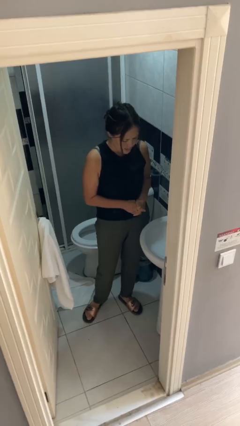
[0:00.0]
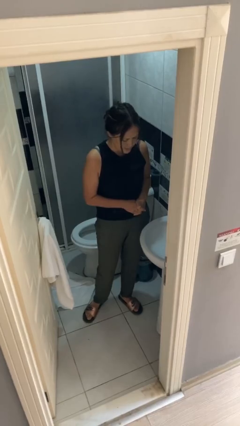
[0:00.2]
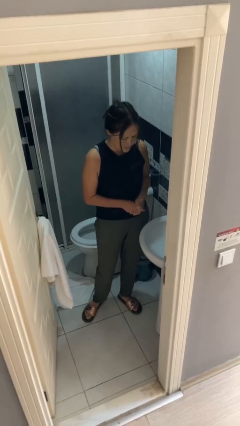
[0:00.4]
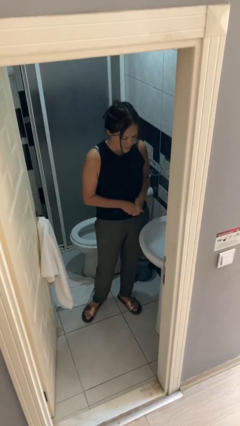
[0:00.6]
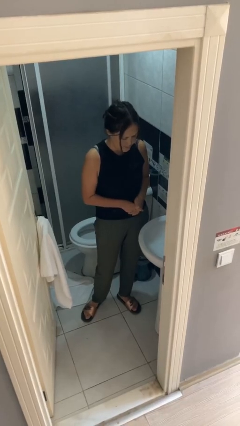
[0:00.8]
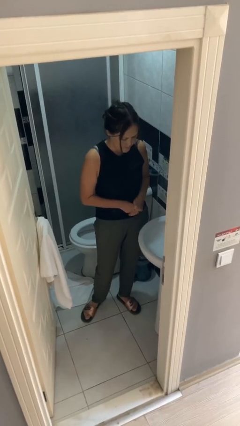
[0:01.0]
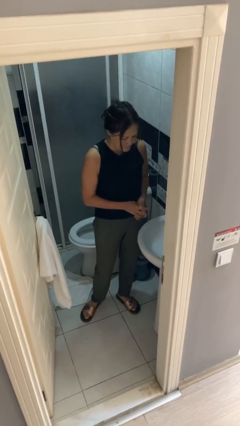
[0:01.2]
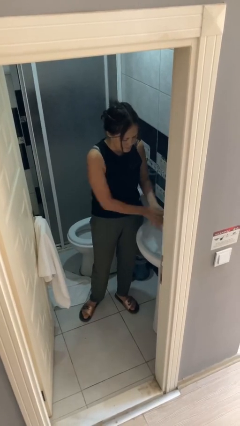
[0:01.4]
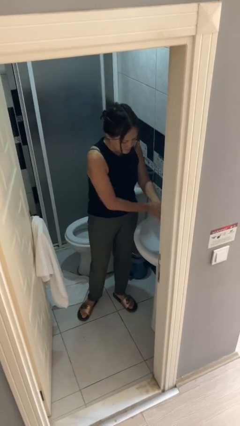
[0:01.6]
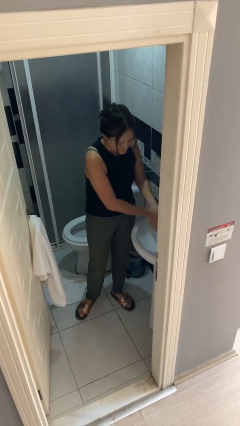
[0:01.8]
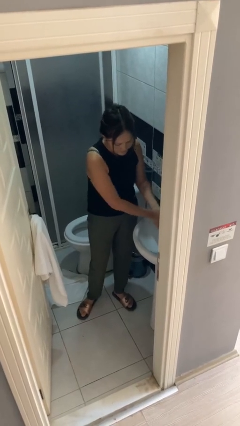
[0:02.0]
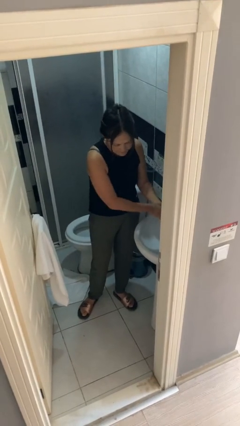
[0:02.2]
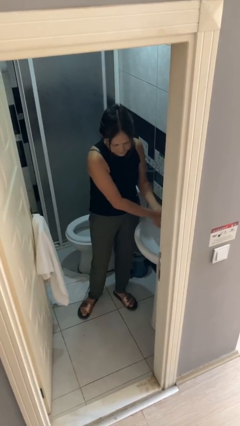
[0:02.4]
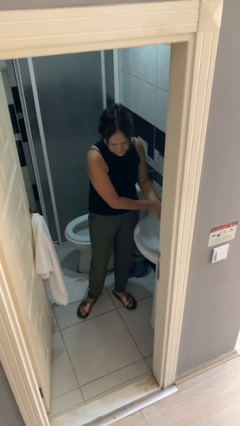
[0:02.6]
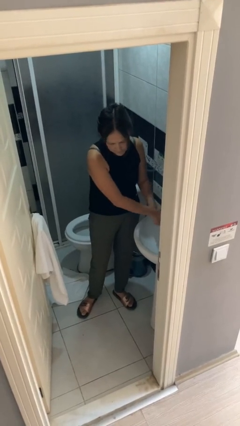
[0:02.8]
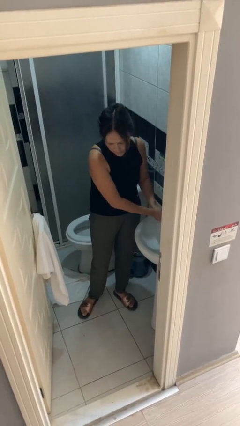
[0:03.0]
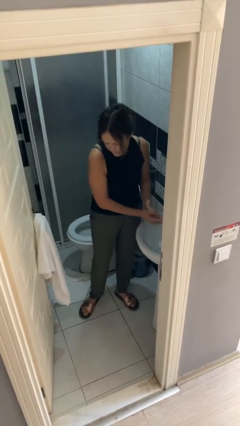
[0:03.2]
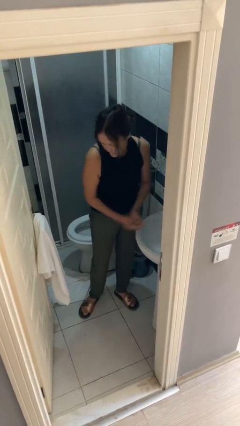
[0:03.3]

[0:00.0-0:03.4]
person washes hands

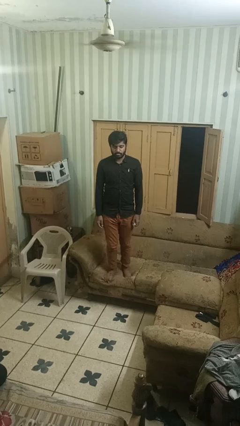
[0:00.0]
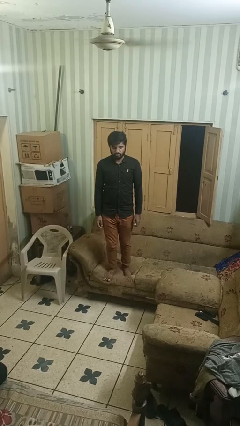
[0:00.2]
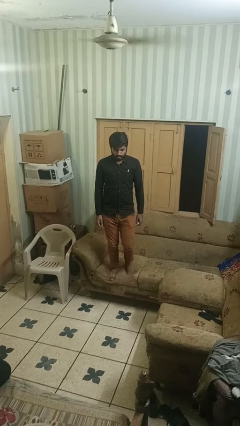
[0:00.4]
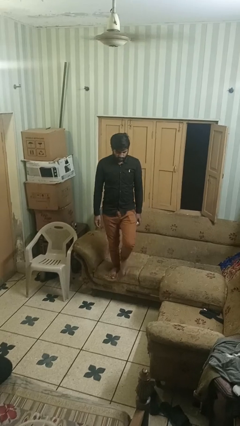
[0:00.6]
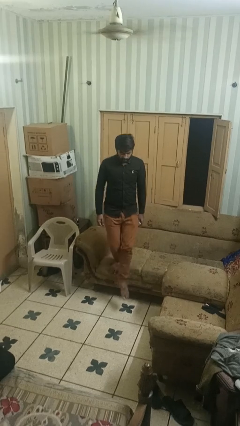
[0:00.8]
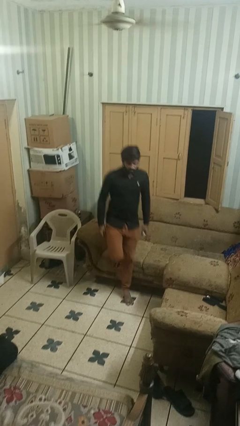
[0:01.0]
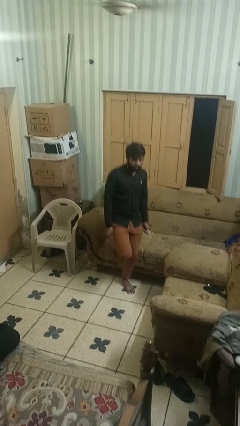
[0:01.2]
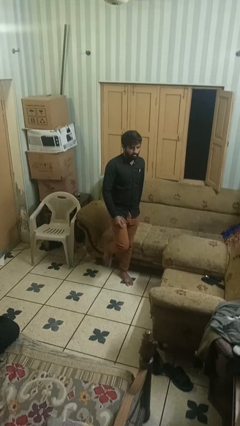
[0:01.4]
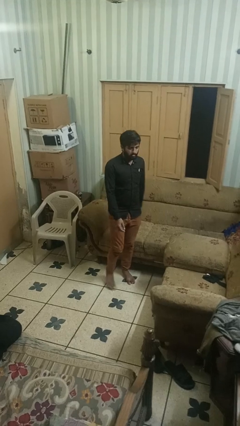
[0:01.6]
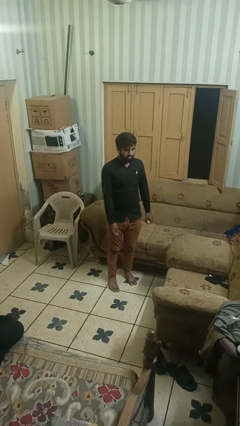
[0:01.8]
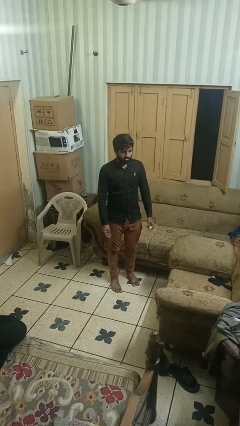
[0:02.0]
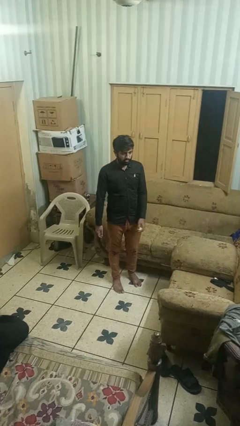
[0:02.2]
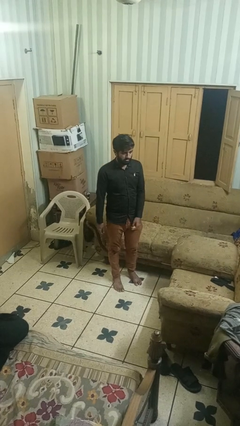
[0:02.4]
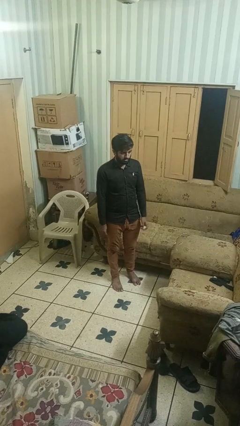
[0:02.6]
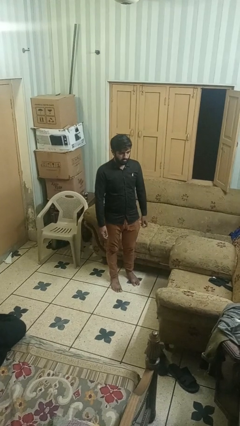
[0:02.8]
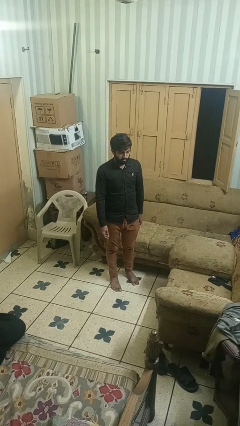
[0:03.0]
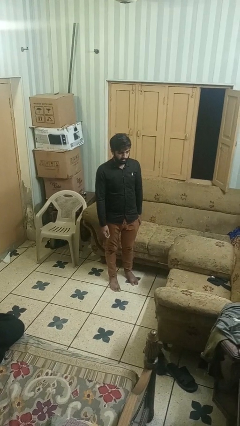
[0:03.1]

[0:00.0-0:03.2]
person climbs off couch

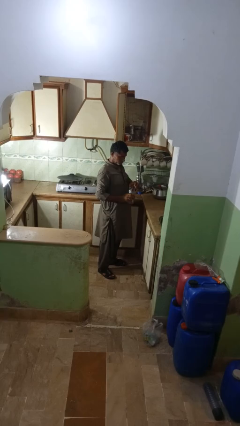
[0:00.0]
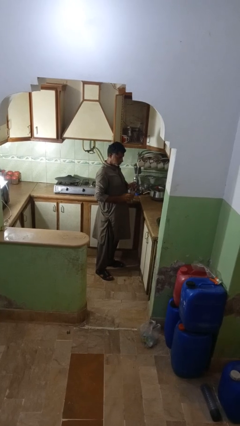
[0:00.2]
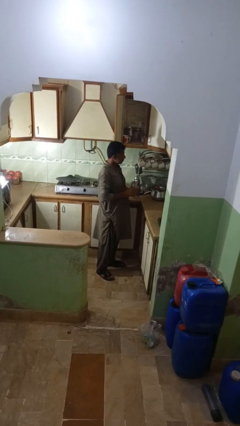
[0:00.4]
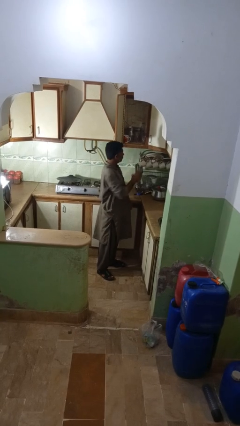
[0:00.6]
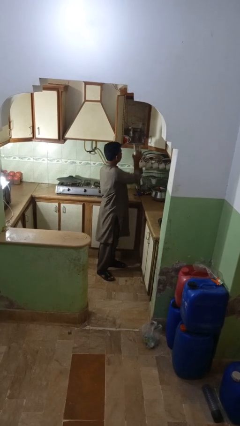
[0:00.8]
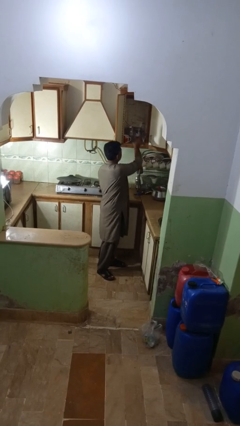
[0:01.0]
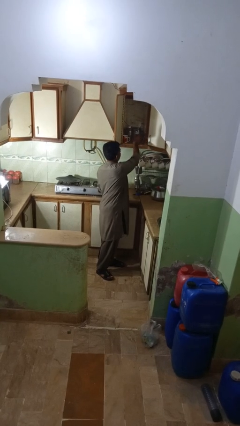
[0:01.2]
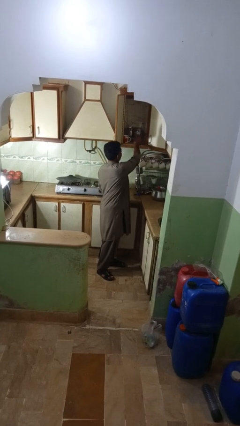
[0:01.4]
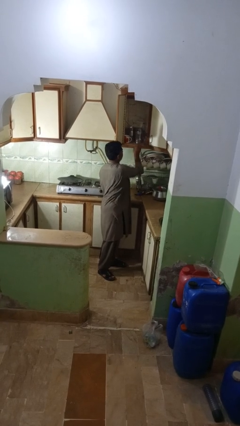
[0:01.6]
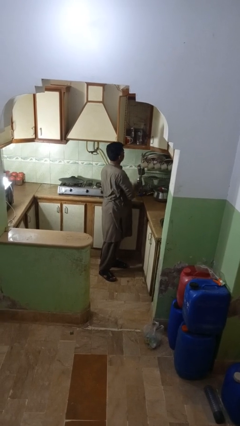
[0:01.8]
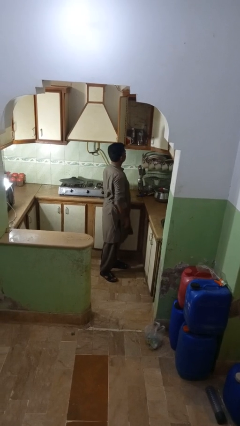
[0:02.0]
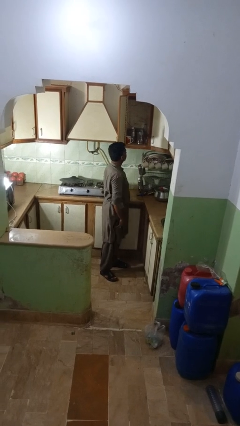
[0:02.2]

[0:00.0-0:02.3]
person puts object into kitchen drawer

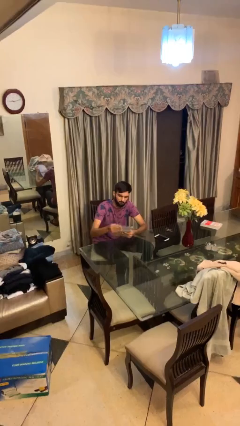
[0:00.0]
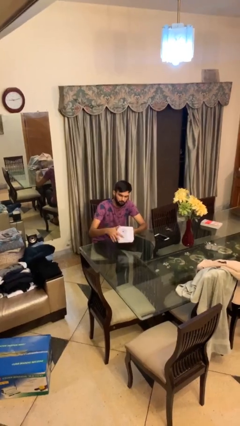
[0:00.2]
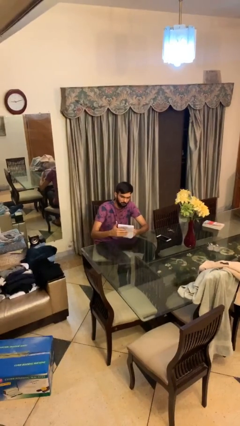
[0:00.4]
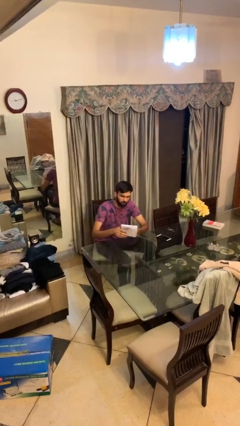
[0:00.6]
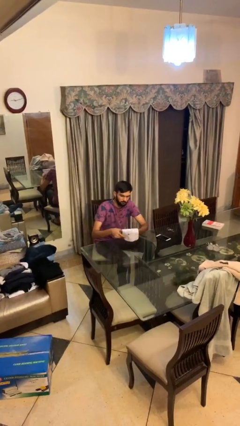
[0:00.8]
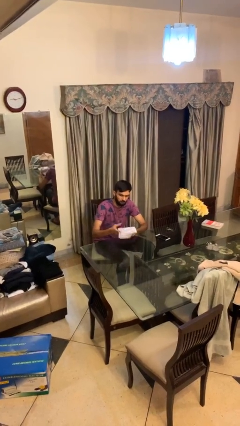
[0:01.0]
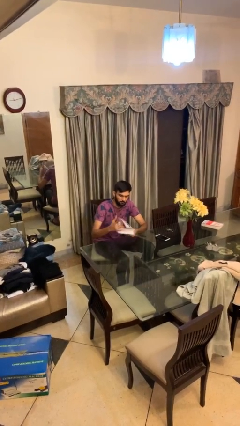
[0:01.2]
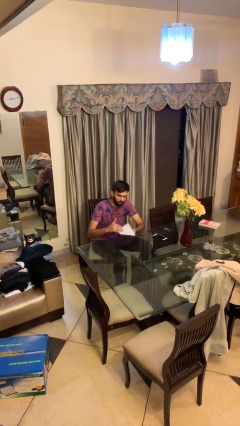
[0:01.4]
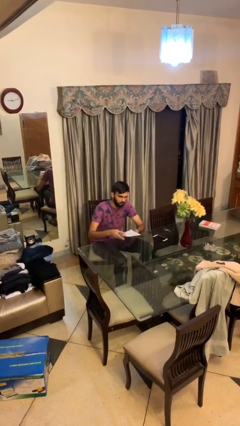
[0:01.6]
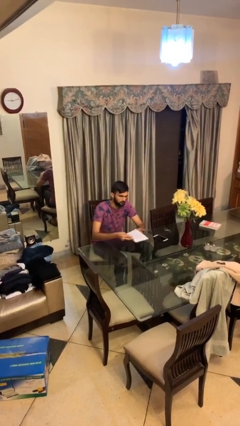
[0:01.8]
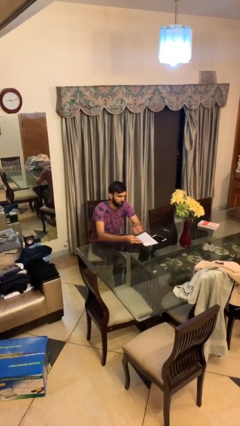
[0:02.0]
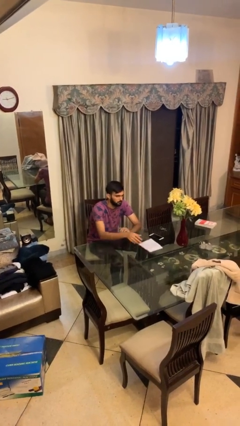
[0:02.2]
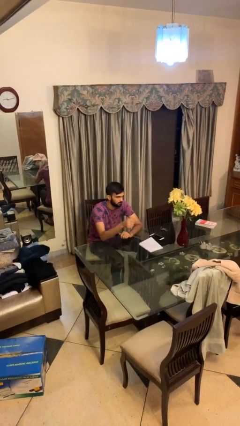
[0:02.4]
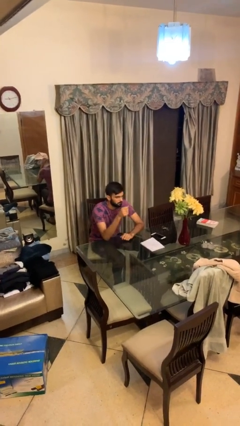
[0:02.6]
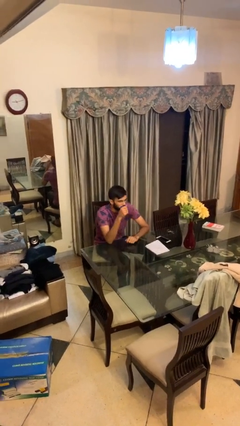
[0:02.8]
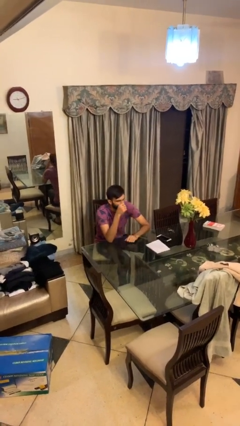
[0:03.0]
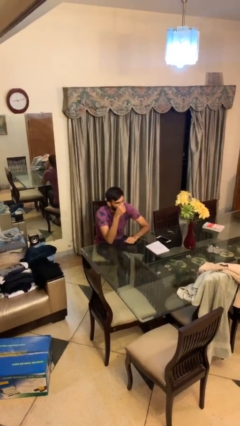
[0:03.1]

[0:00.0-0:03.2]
person puts down object on table

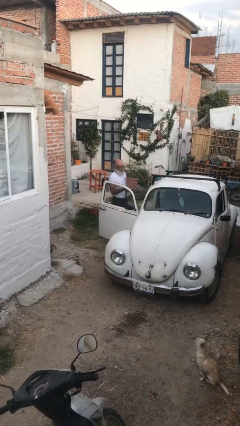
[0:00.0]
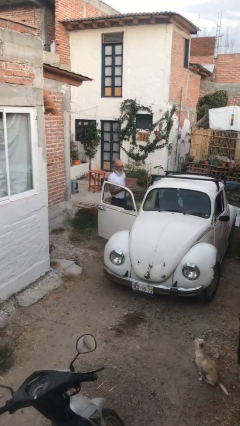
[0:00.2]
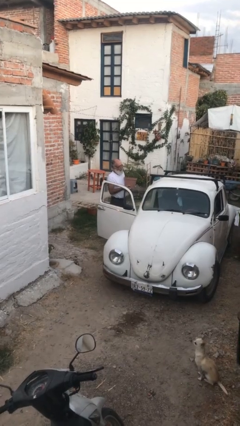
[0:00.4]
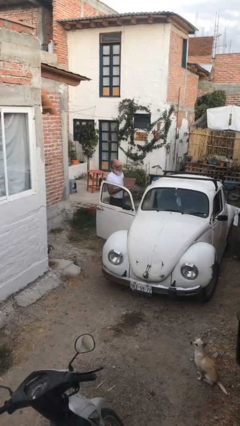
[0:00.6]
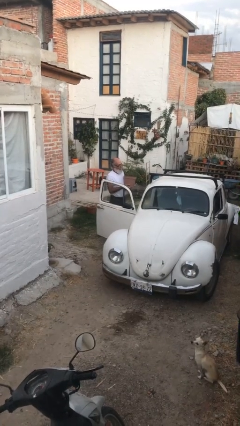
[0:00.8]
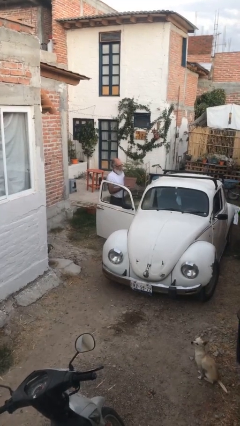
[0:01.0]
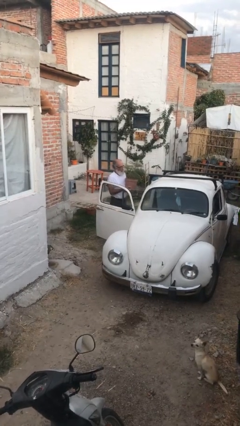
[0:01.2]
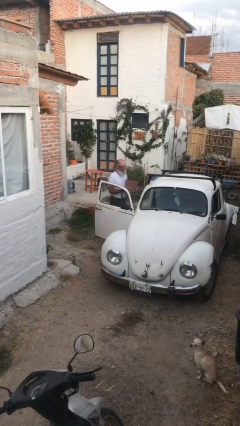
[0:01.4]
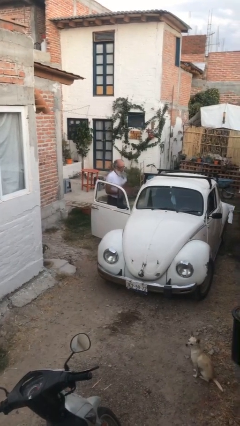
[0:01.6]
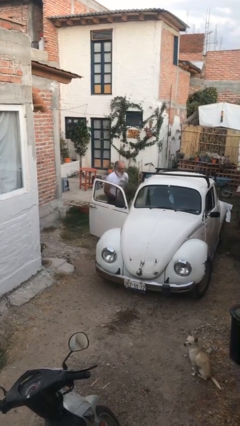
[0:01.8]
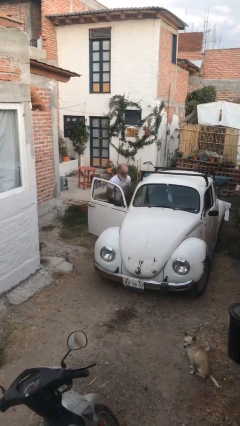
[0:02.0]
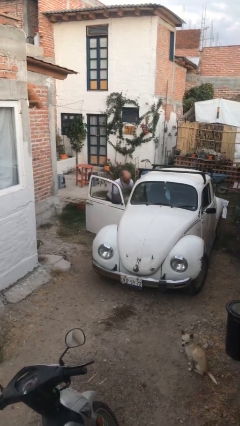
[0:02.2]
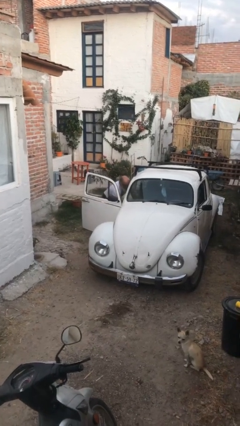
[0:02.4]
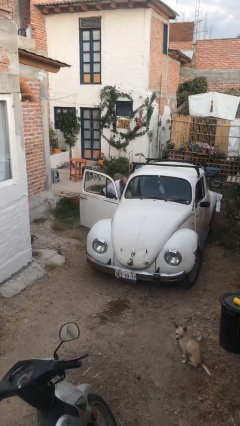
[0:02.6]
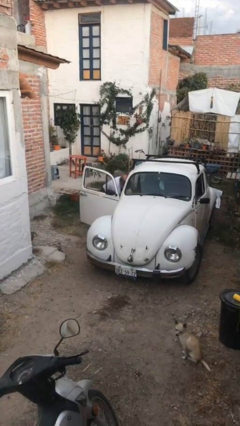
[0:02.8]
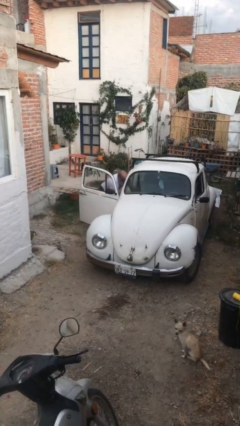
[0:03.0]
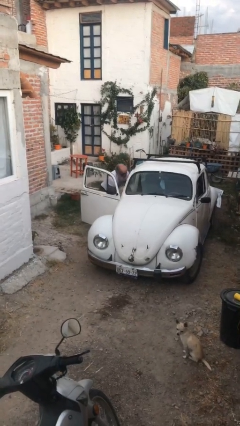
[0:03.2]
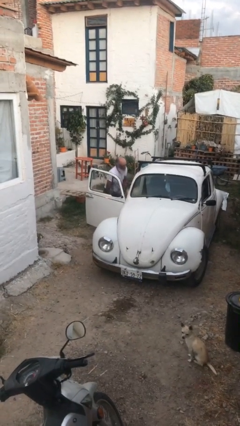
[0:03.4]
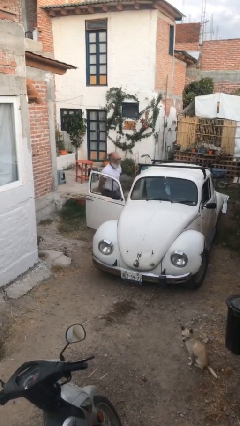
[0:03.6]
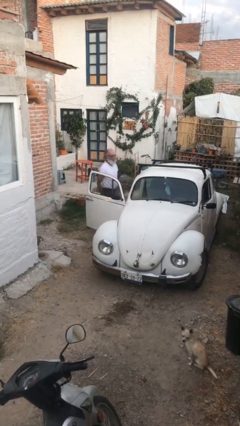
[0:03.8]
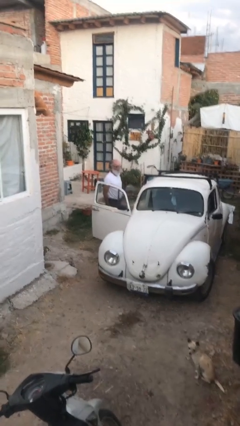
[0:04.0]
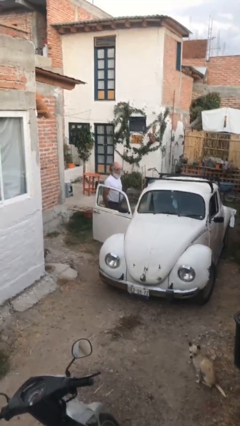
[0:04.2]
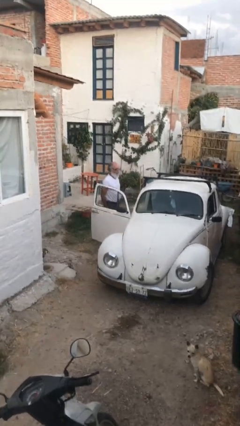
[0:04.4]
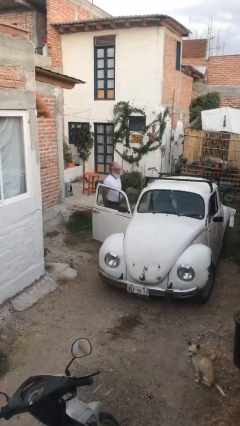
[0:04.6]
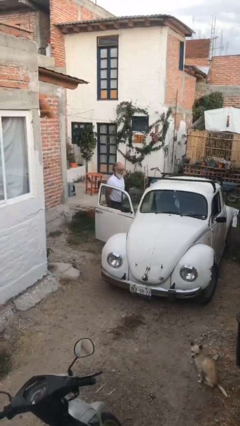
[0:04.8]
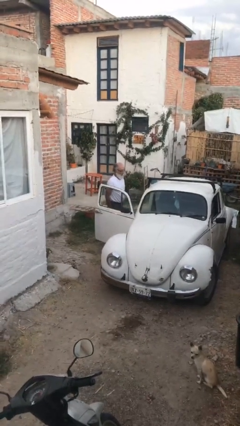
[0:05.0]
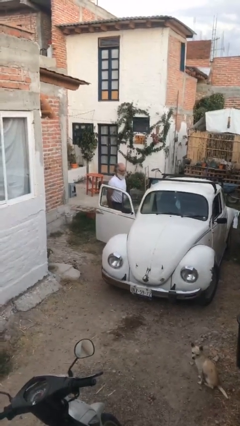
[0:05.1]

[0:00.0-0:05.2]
person loads car

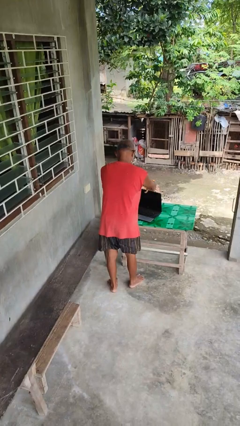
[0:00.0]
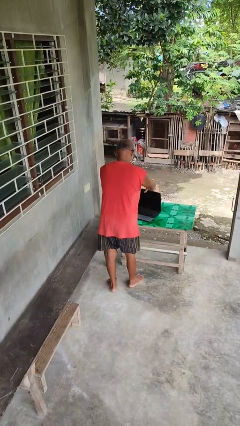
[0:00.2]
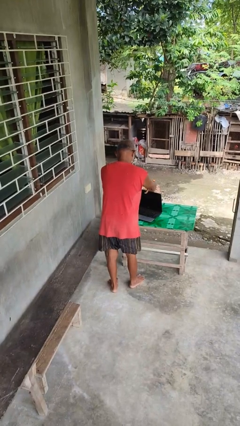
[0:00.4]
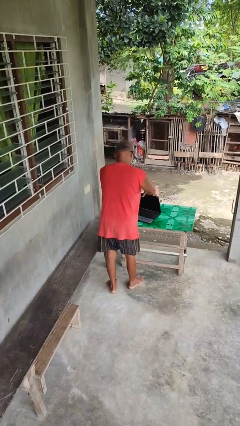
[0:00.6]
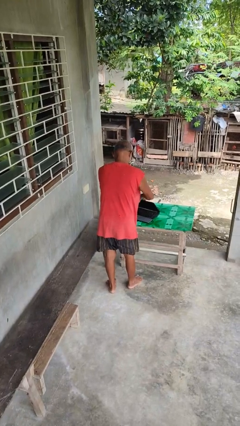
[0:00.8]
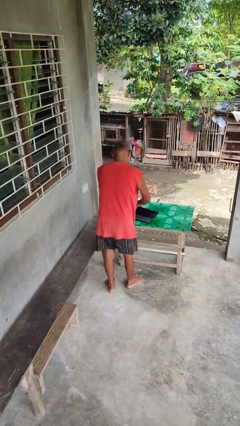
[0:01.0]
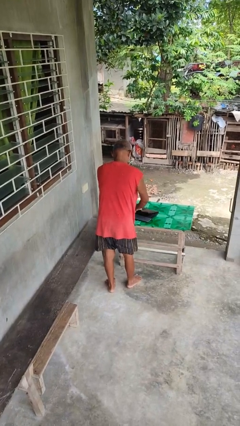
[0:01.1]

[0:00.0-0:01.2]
person closes laptop
